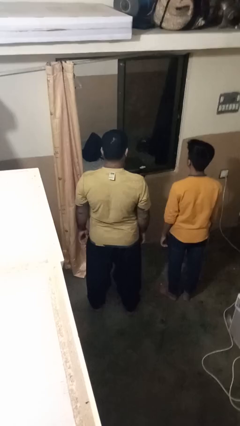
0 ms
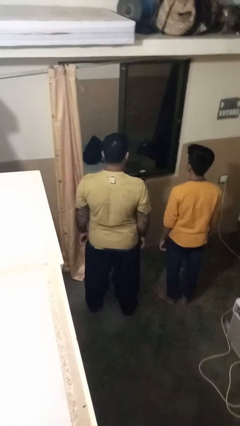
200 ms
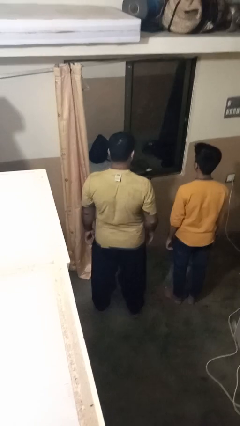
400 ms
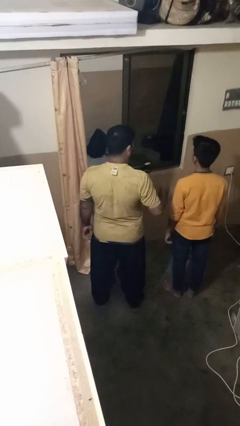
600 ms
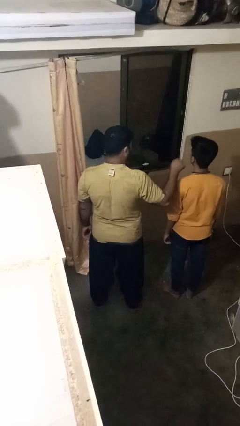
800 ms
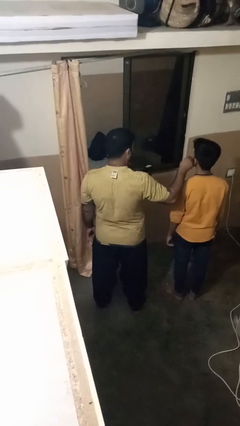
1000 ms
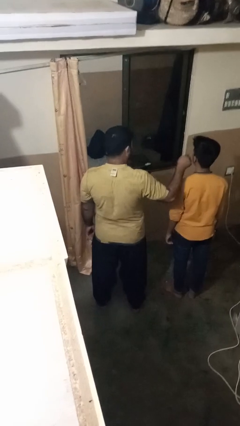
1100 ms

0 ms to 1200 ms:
person touches face of person

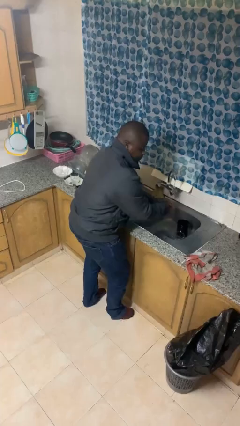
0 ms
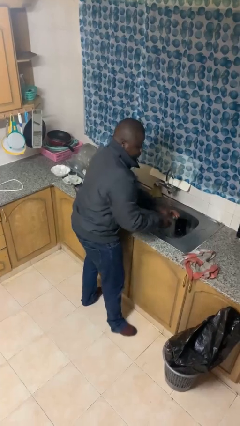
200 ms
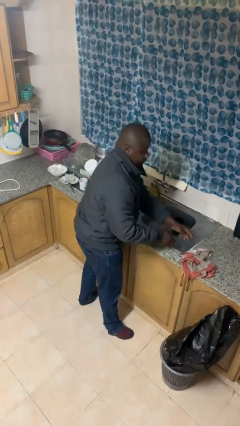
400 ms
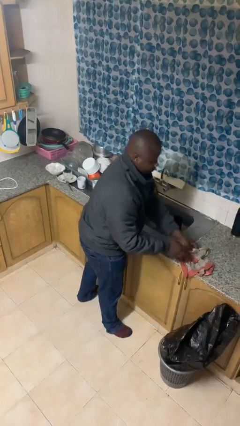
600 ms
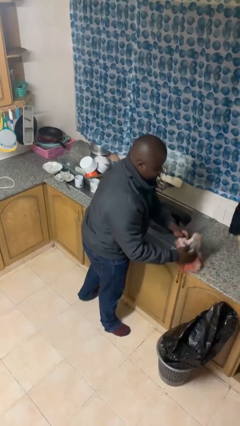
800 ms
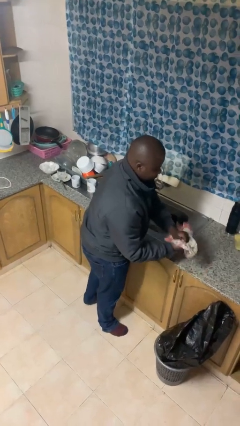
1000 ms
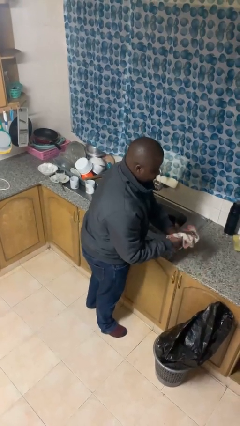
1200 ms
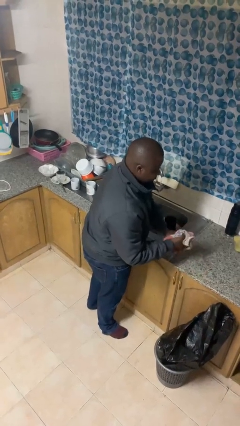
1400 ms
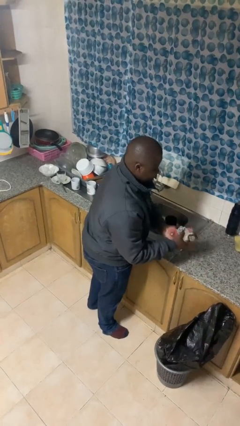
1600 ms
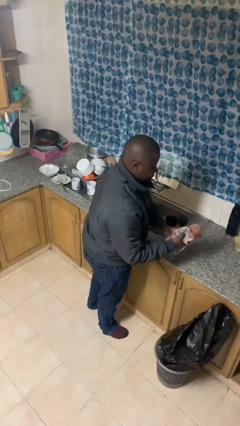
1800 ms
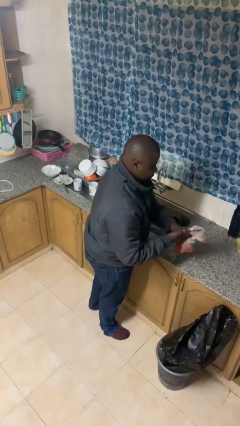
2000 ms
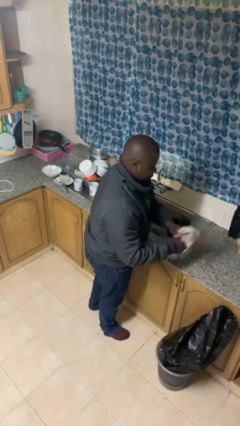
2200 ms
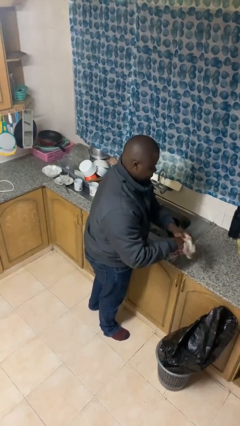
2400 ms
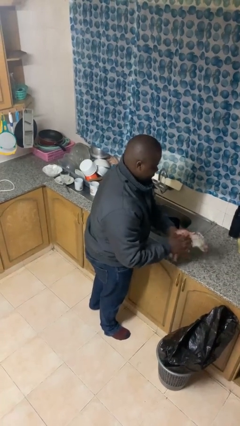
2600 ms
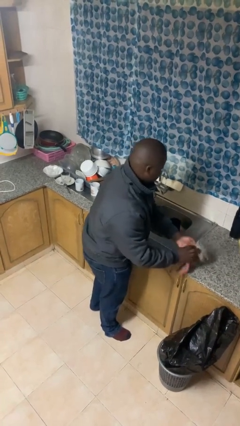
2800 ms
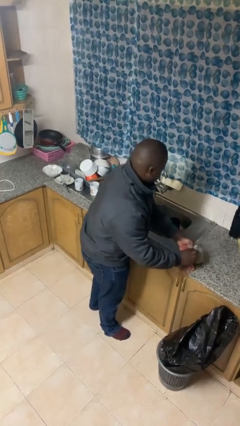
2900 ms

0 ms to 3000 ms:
person dries hands with towel

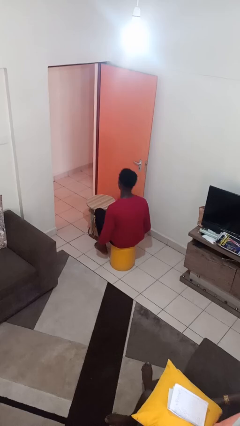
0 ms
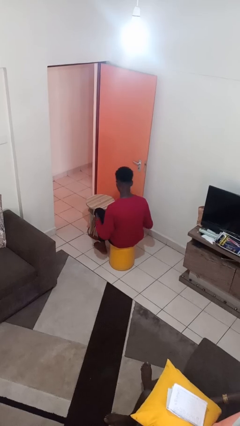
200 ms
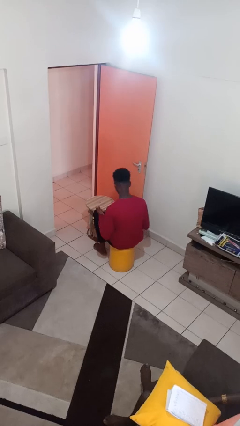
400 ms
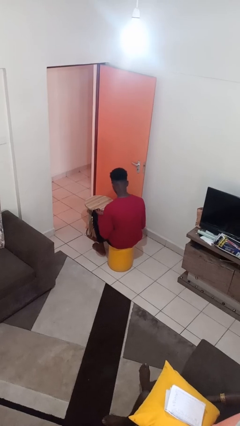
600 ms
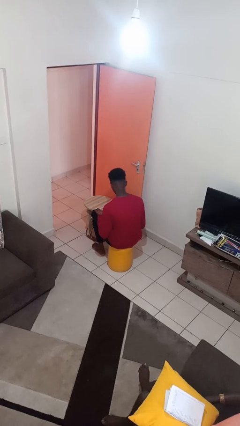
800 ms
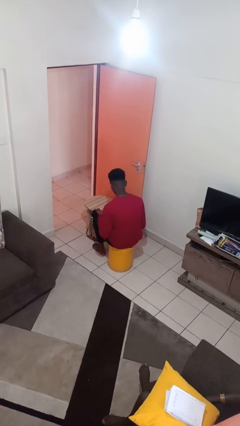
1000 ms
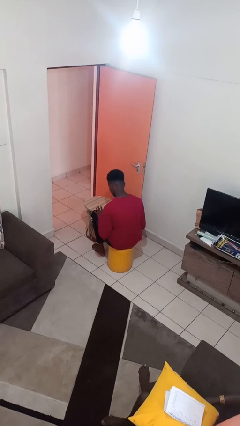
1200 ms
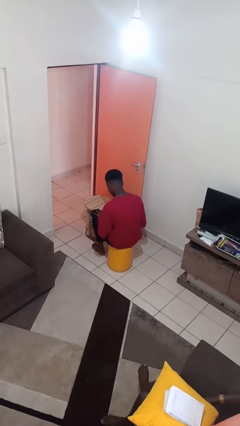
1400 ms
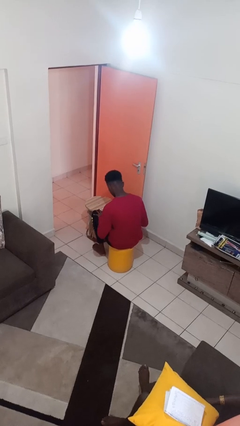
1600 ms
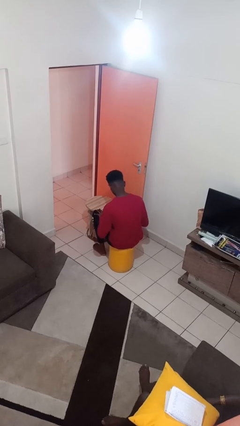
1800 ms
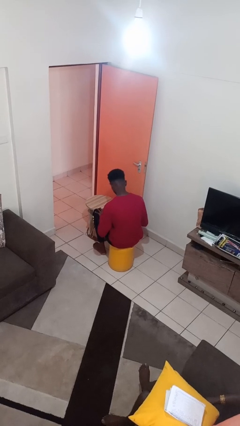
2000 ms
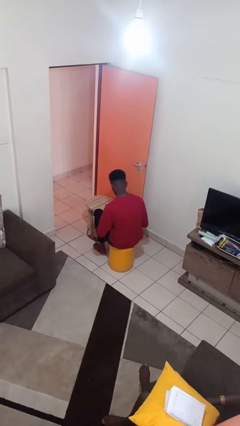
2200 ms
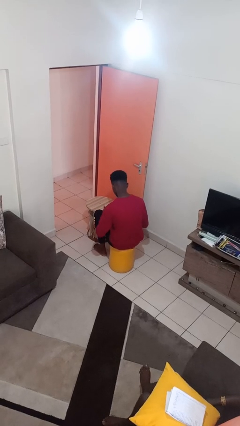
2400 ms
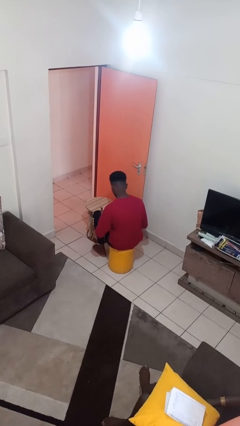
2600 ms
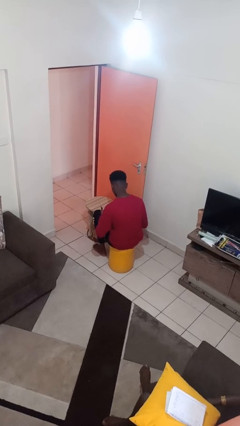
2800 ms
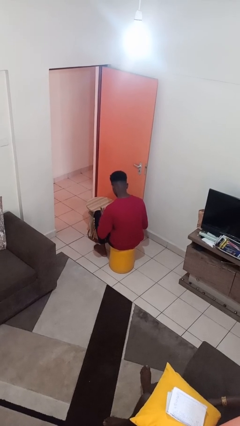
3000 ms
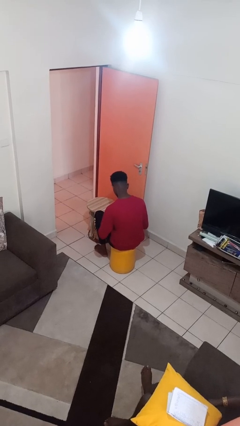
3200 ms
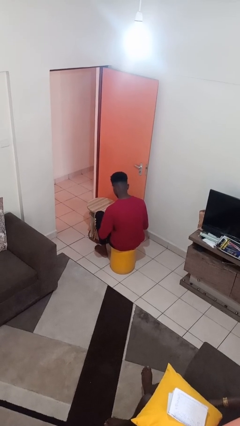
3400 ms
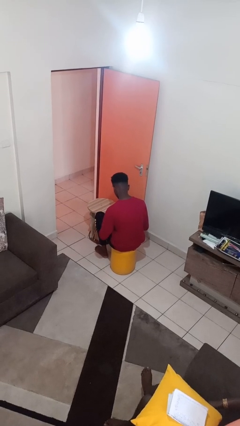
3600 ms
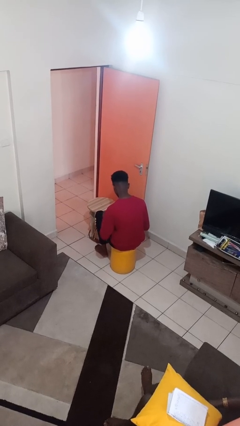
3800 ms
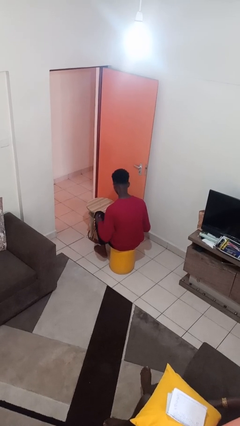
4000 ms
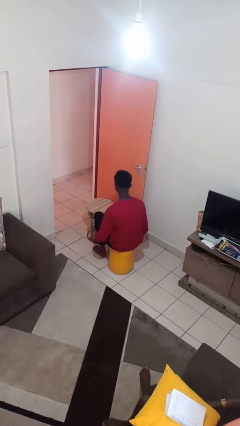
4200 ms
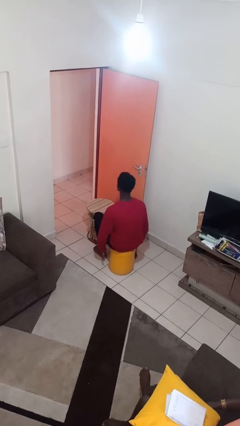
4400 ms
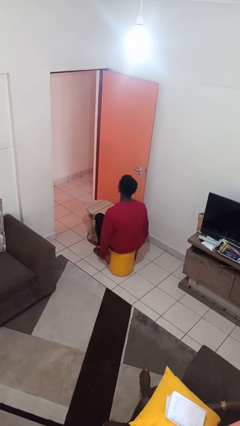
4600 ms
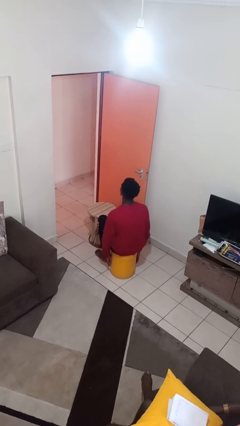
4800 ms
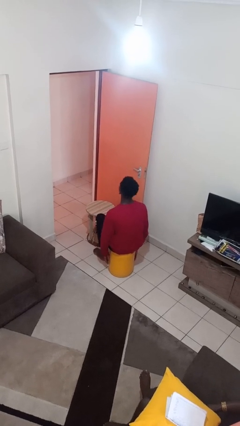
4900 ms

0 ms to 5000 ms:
person looks at hands in lap

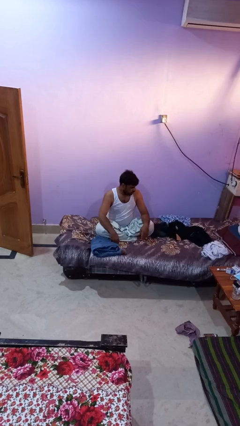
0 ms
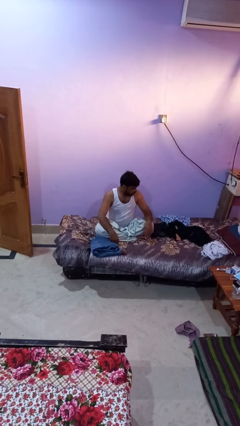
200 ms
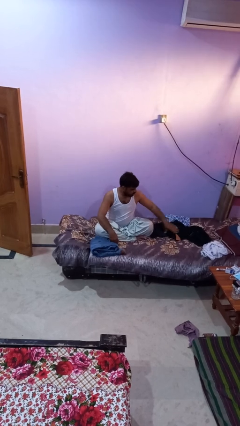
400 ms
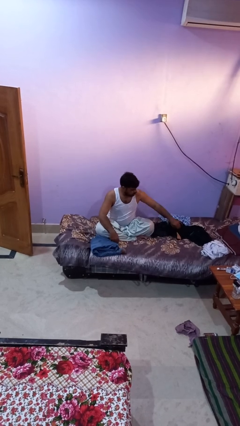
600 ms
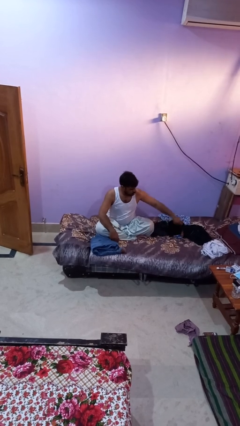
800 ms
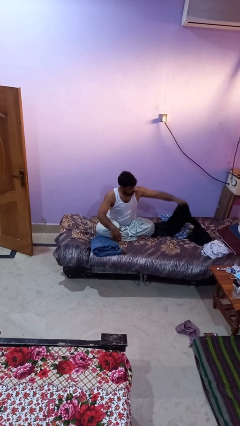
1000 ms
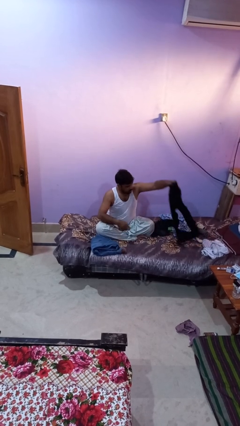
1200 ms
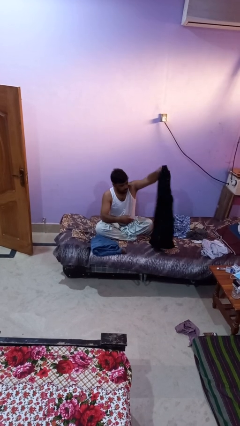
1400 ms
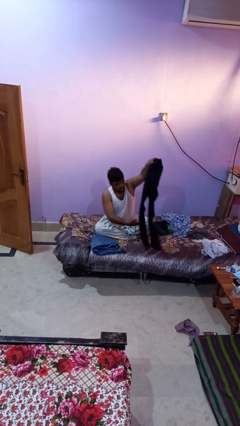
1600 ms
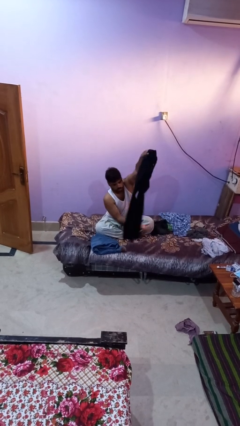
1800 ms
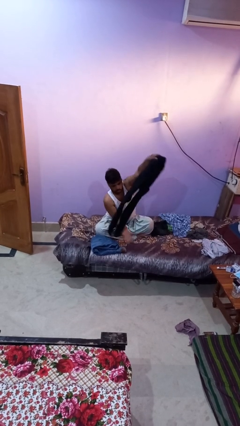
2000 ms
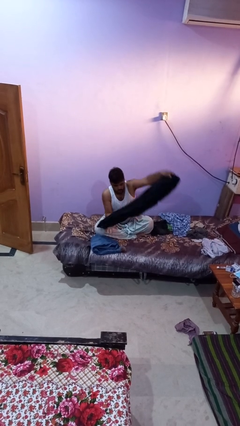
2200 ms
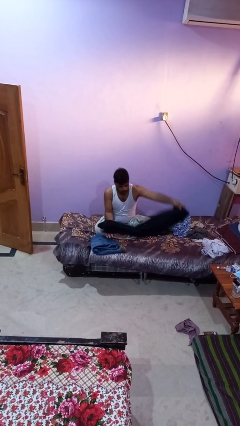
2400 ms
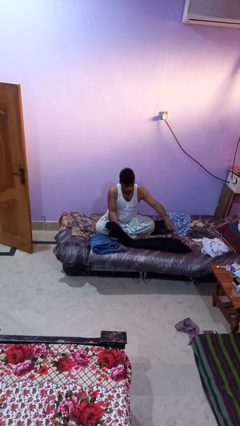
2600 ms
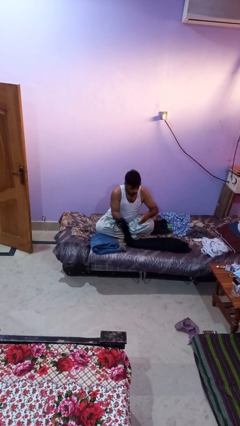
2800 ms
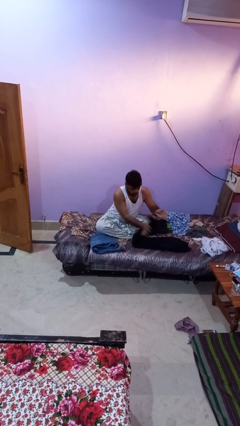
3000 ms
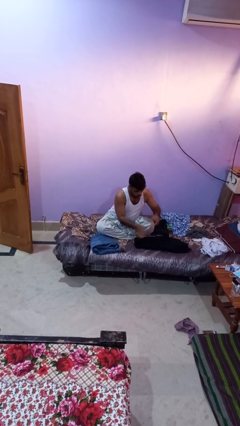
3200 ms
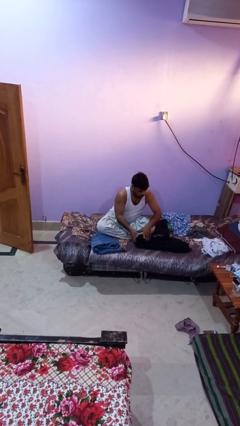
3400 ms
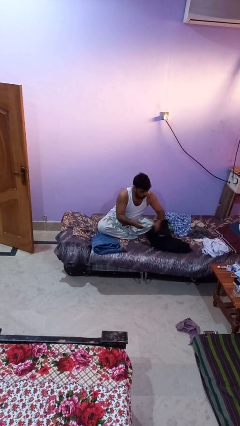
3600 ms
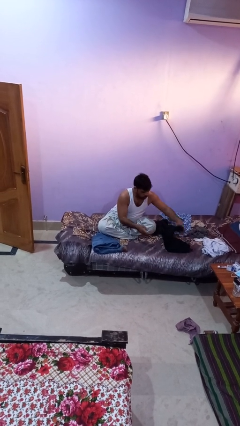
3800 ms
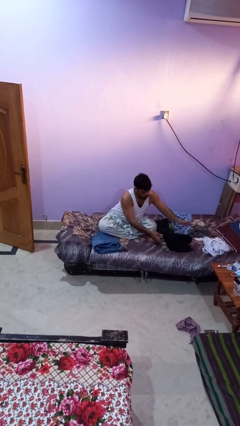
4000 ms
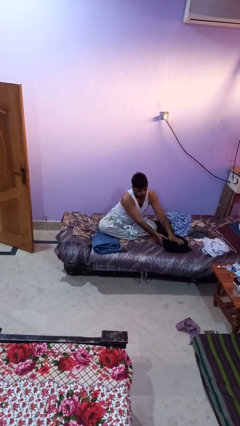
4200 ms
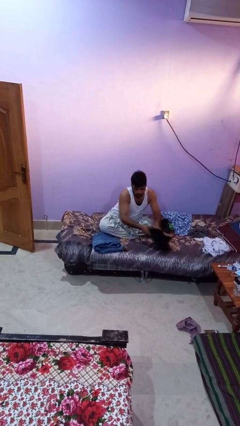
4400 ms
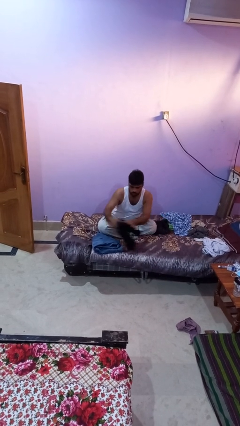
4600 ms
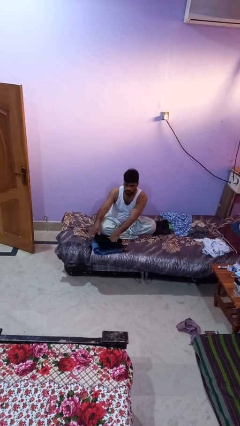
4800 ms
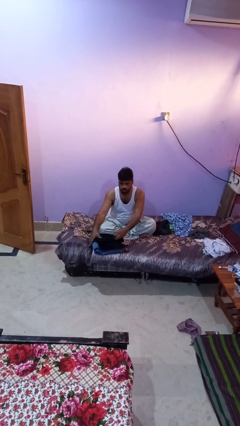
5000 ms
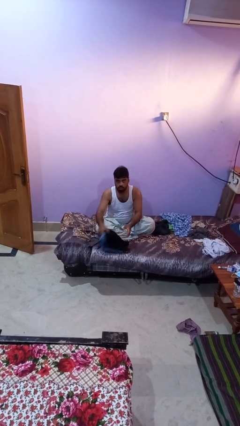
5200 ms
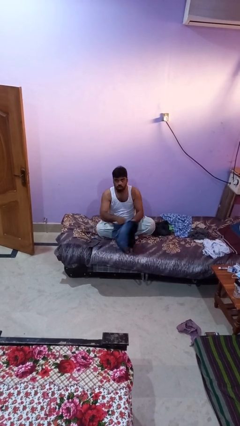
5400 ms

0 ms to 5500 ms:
person folds pants

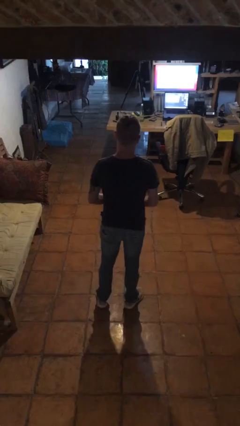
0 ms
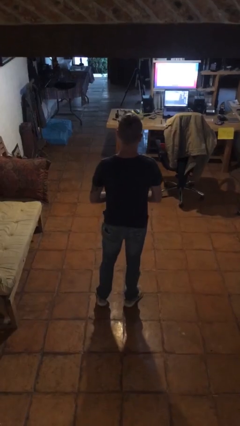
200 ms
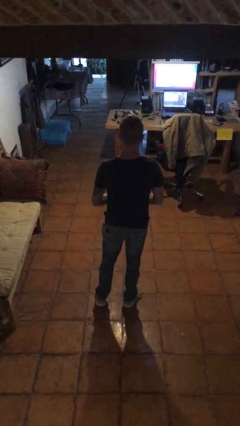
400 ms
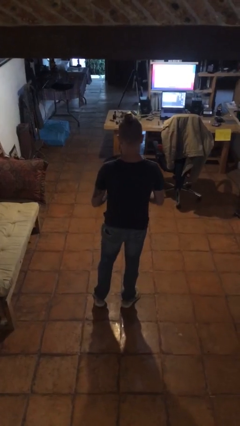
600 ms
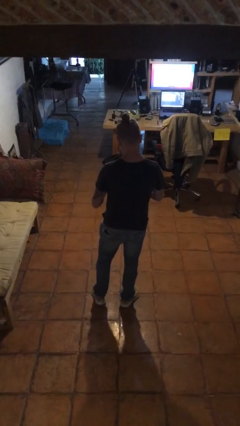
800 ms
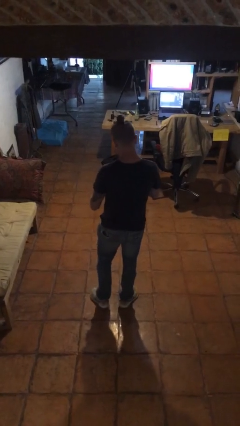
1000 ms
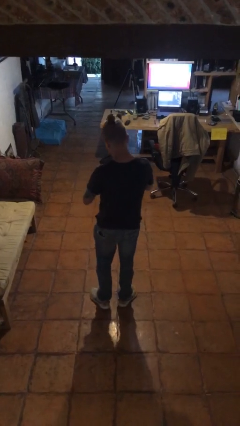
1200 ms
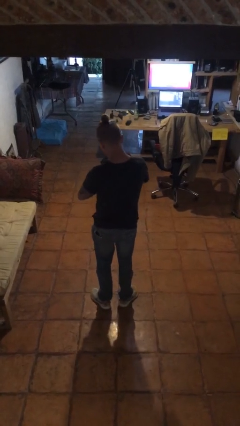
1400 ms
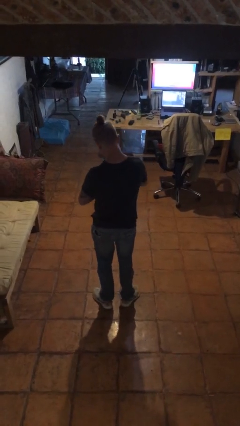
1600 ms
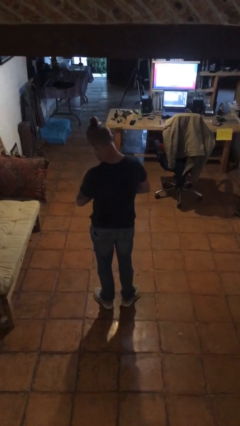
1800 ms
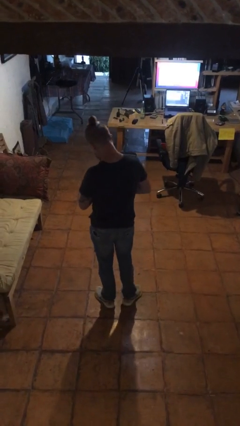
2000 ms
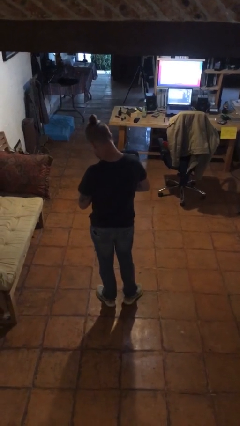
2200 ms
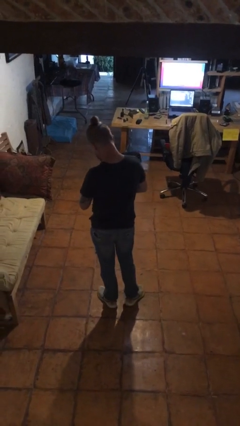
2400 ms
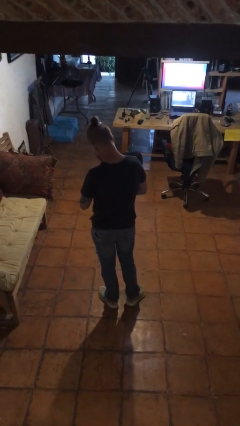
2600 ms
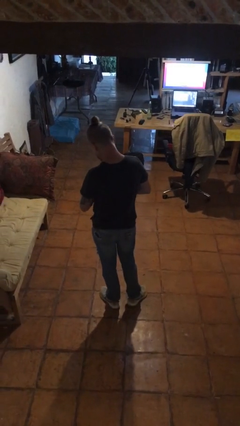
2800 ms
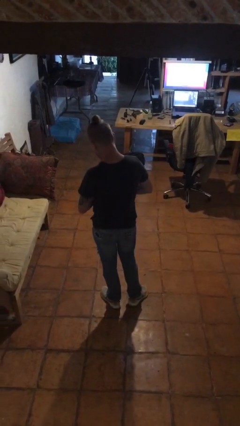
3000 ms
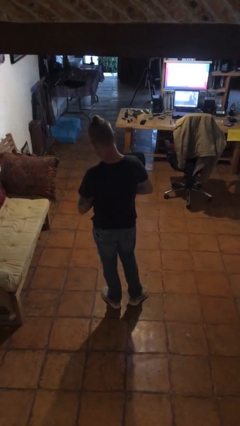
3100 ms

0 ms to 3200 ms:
person puts on wristwatch
